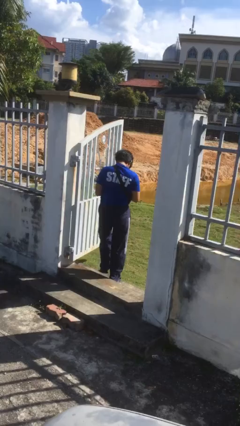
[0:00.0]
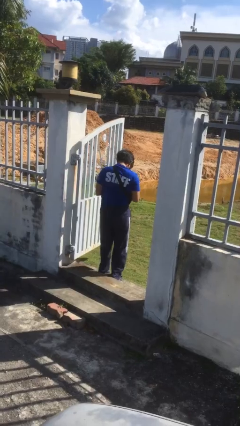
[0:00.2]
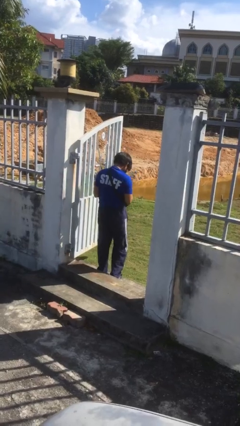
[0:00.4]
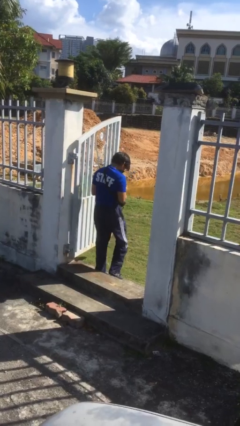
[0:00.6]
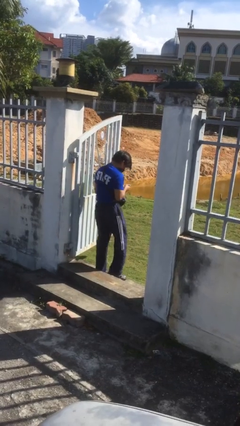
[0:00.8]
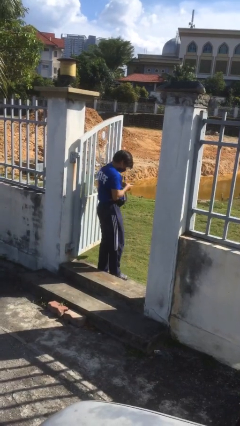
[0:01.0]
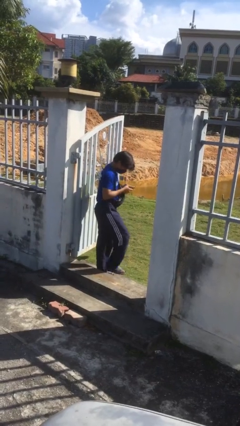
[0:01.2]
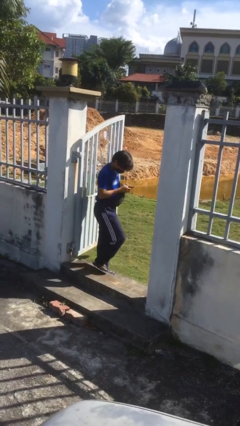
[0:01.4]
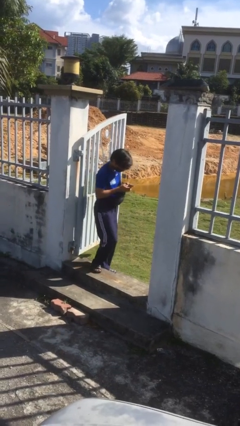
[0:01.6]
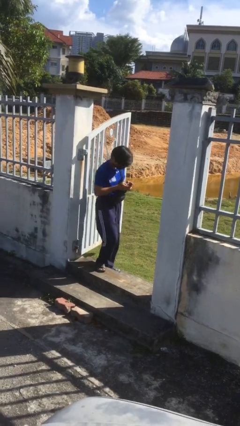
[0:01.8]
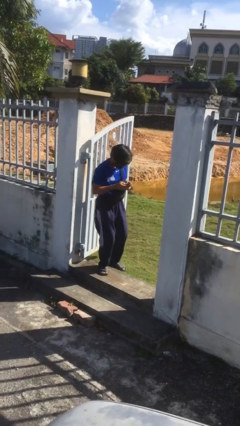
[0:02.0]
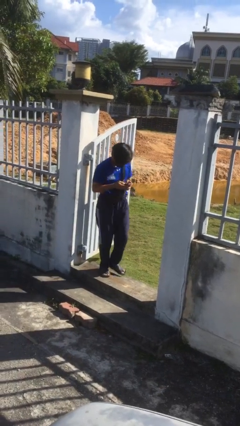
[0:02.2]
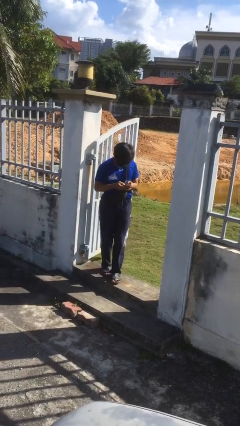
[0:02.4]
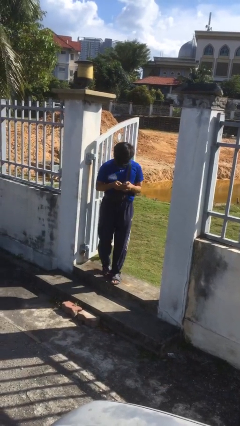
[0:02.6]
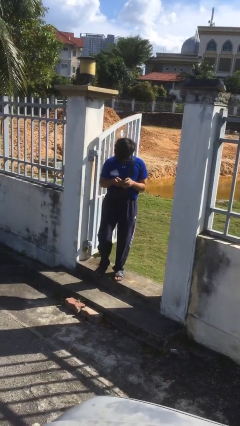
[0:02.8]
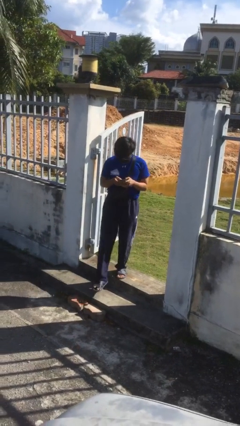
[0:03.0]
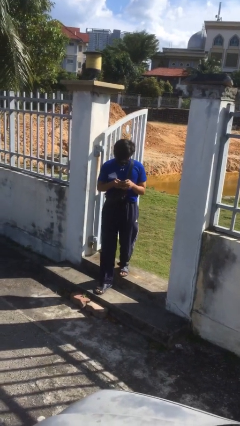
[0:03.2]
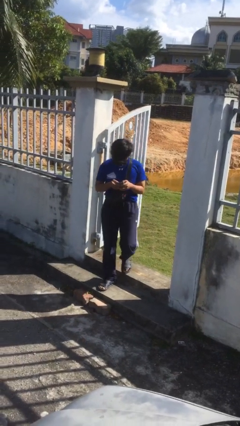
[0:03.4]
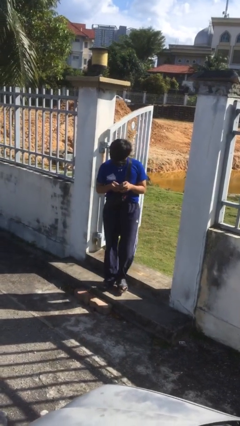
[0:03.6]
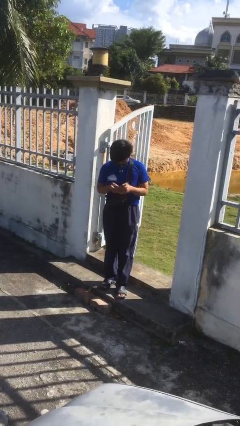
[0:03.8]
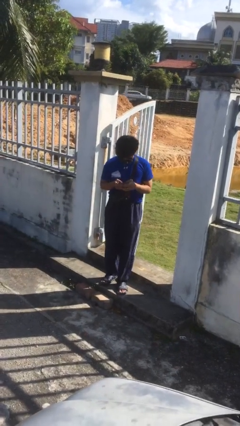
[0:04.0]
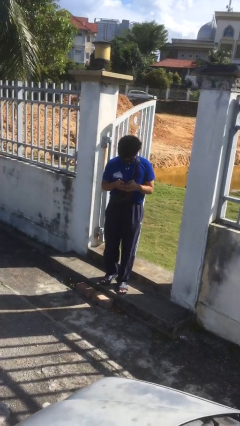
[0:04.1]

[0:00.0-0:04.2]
person enters scene through structure

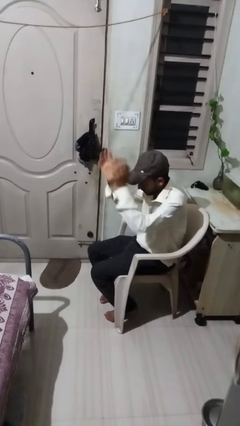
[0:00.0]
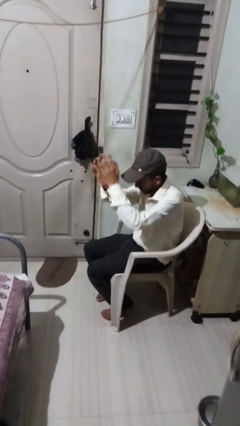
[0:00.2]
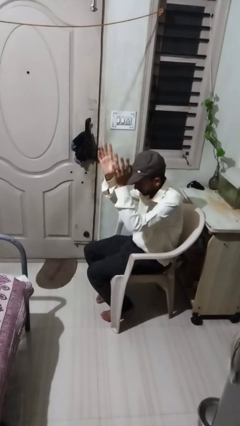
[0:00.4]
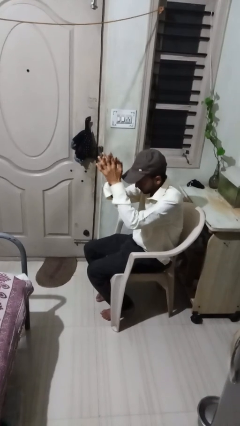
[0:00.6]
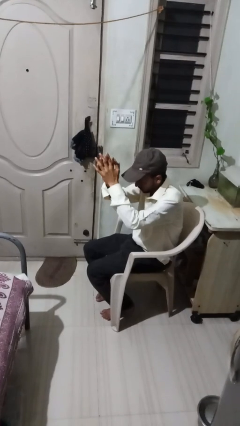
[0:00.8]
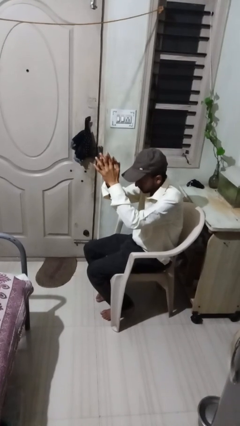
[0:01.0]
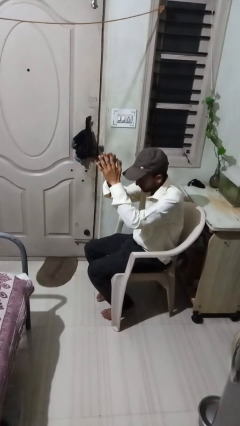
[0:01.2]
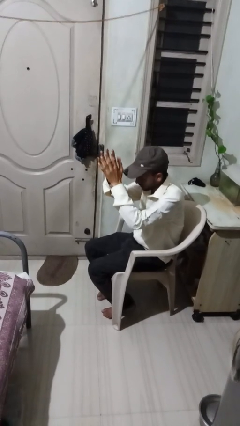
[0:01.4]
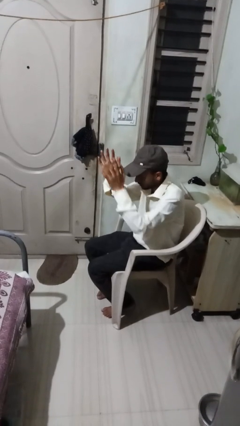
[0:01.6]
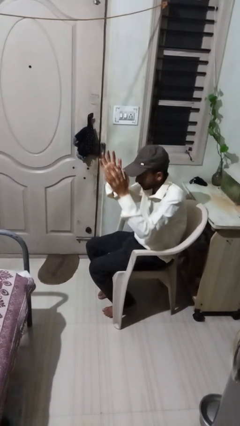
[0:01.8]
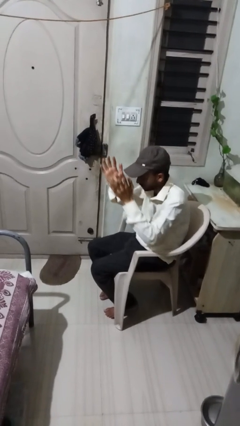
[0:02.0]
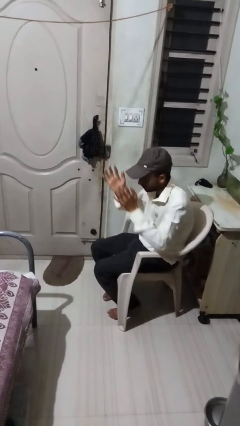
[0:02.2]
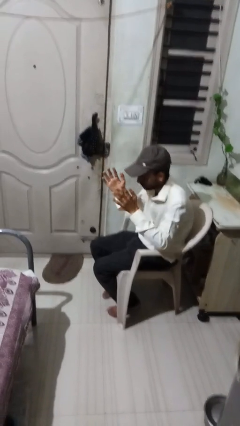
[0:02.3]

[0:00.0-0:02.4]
person claps hands

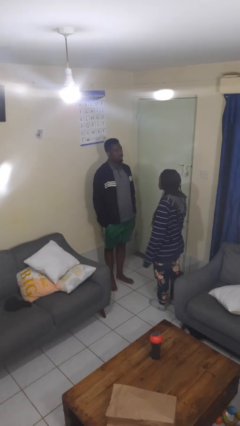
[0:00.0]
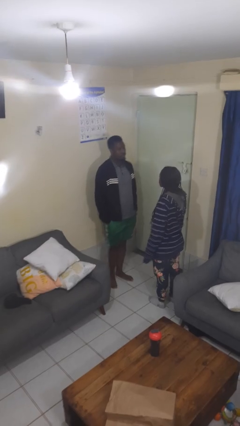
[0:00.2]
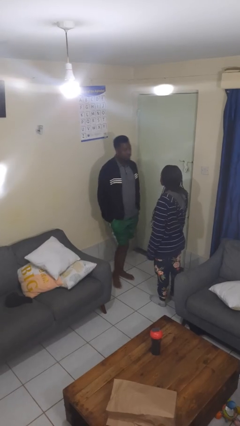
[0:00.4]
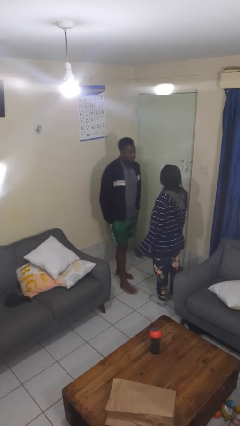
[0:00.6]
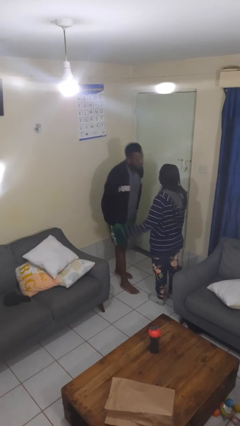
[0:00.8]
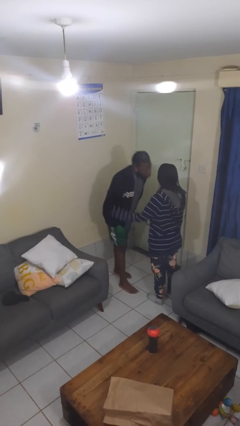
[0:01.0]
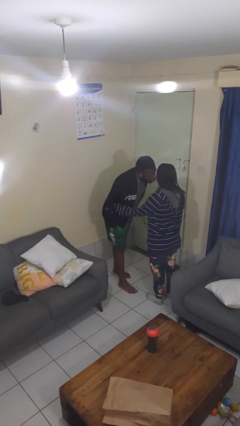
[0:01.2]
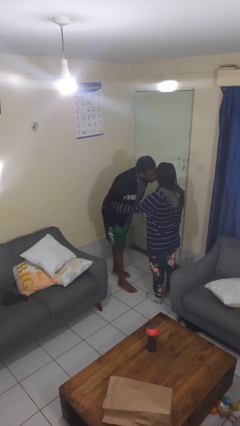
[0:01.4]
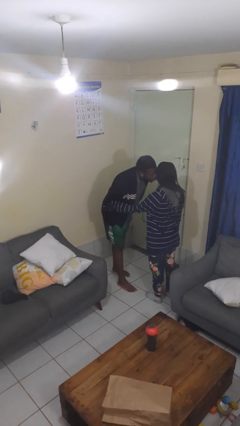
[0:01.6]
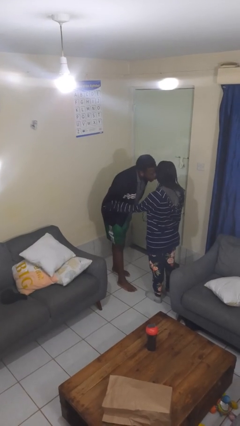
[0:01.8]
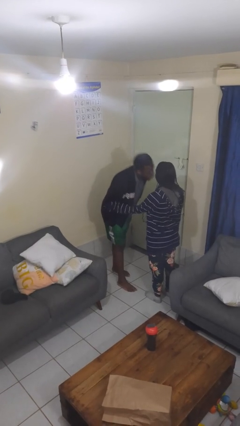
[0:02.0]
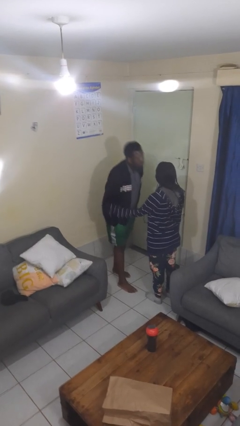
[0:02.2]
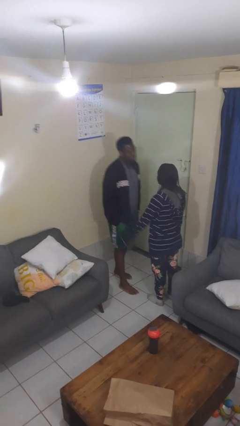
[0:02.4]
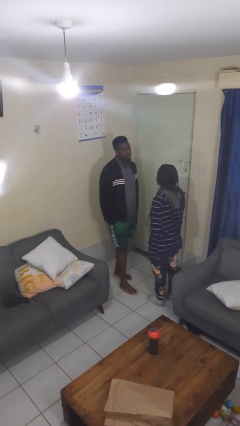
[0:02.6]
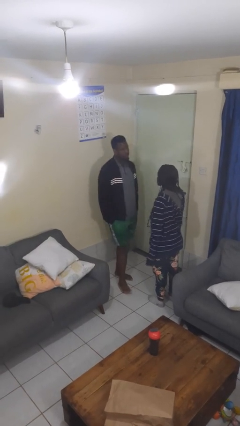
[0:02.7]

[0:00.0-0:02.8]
person kisses cheek of person

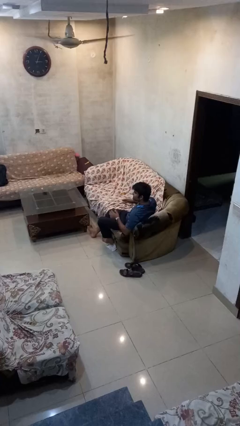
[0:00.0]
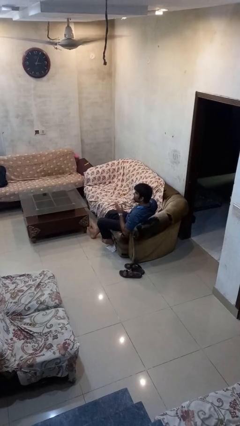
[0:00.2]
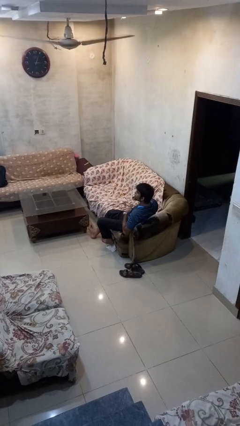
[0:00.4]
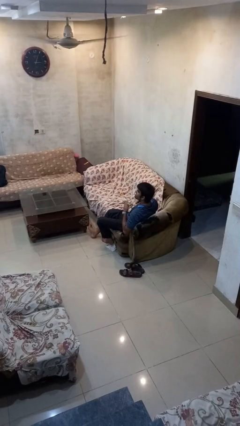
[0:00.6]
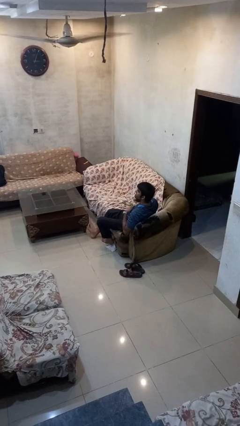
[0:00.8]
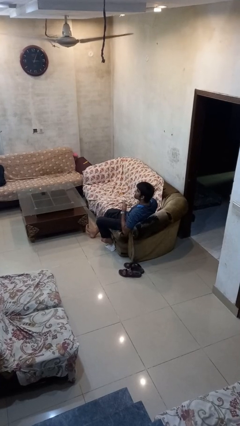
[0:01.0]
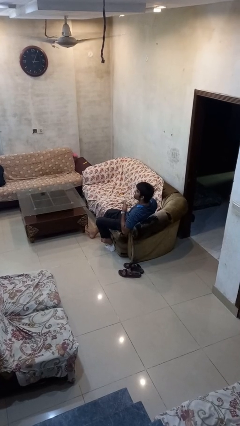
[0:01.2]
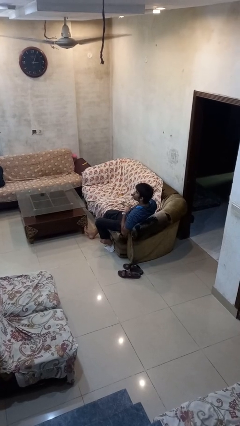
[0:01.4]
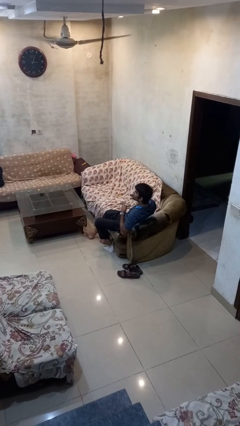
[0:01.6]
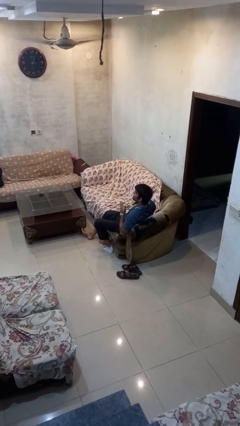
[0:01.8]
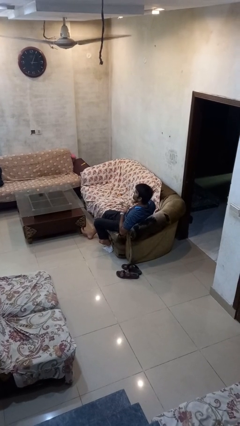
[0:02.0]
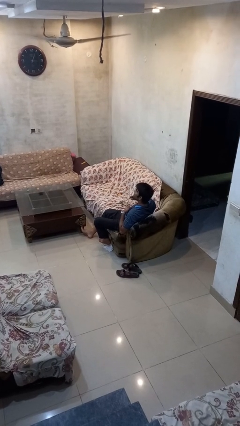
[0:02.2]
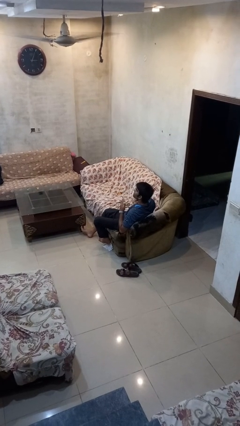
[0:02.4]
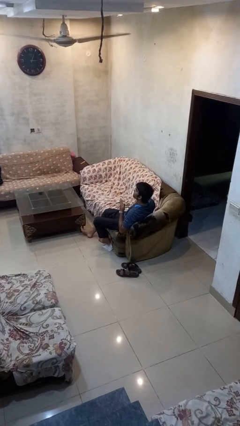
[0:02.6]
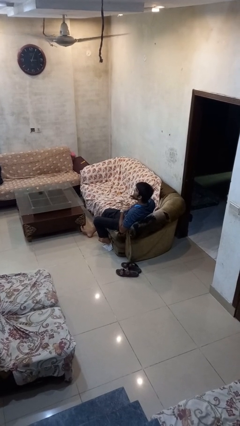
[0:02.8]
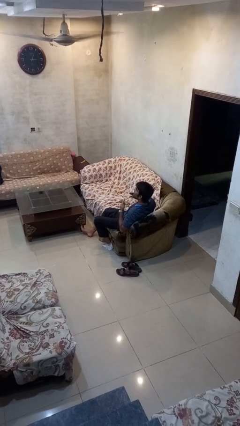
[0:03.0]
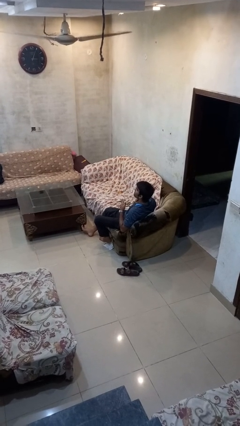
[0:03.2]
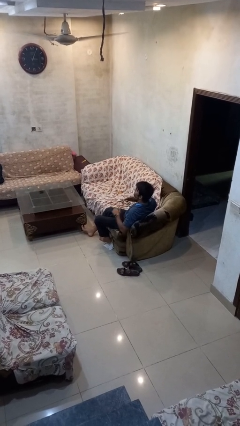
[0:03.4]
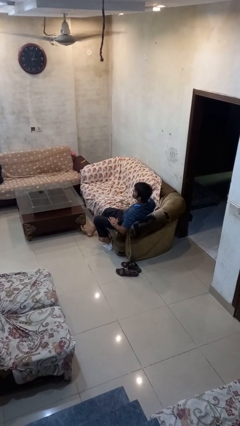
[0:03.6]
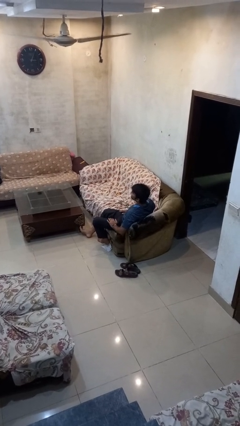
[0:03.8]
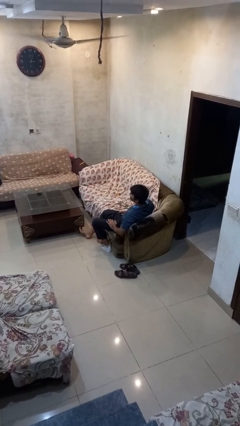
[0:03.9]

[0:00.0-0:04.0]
person drums on chest

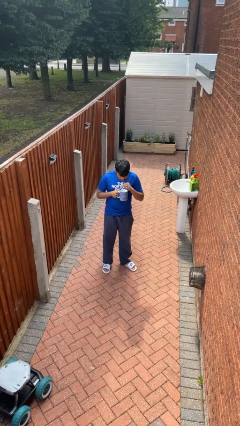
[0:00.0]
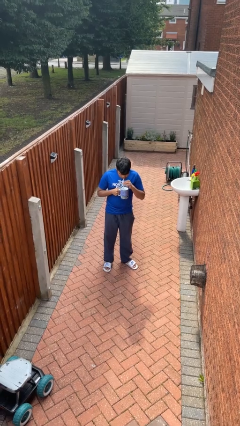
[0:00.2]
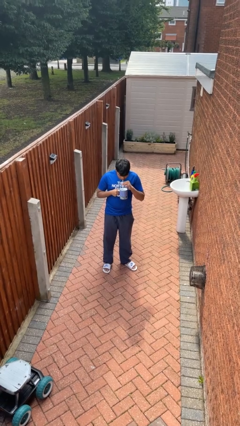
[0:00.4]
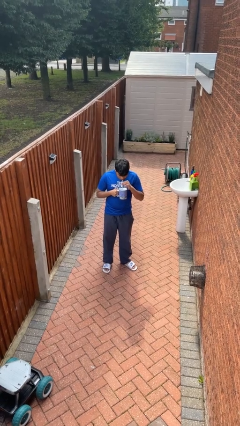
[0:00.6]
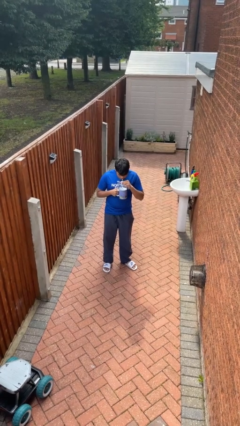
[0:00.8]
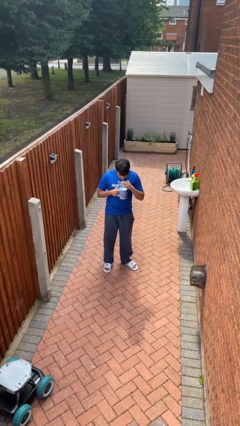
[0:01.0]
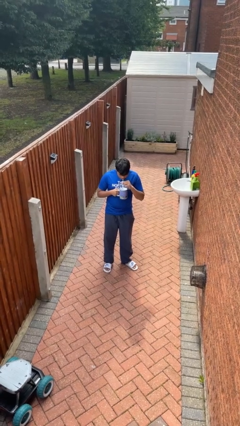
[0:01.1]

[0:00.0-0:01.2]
person drinks from straw

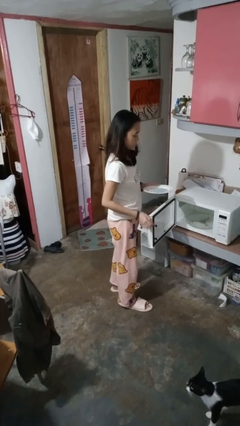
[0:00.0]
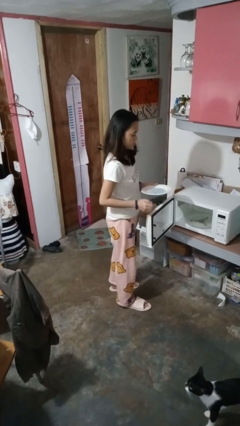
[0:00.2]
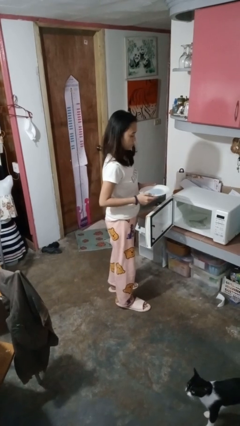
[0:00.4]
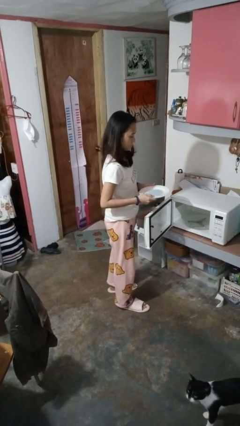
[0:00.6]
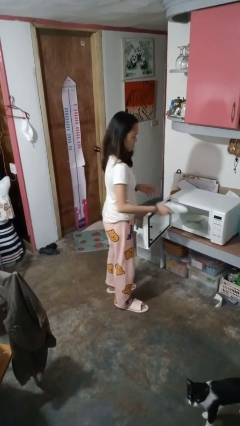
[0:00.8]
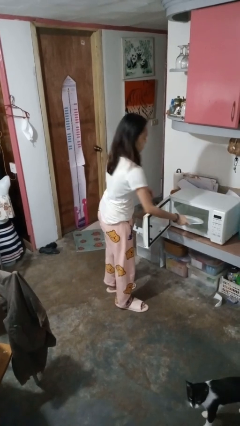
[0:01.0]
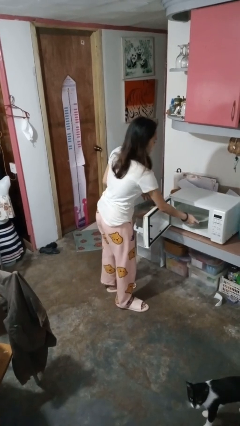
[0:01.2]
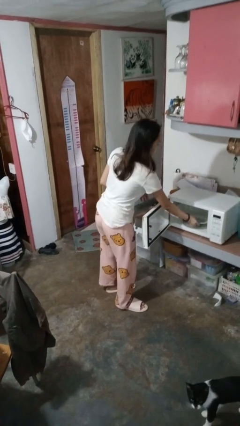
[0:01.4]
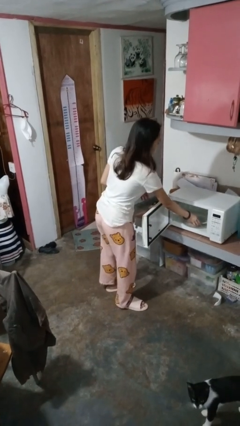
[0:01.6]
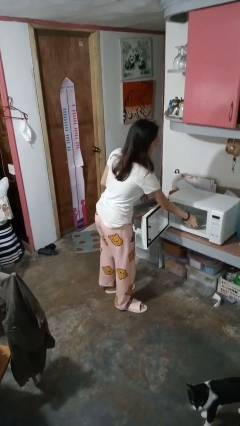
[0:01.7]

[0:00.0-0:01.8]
person puts object into microwave

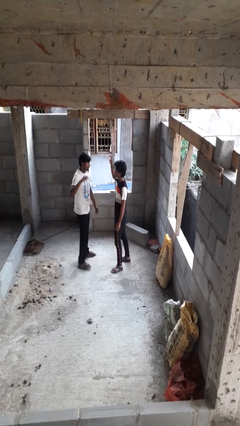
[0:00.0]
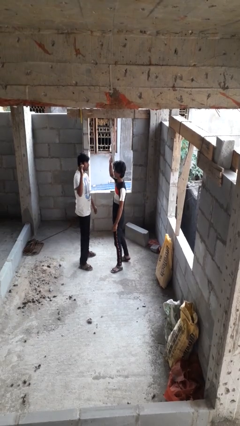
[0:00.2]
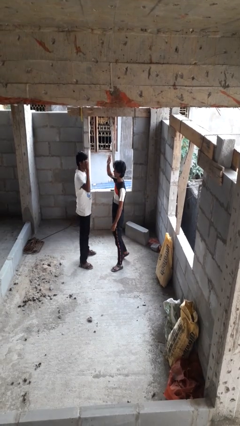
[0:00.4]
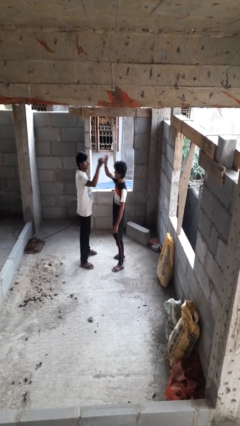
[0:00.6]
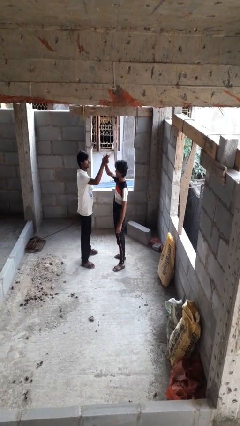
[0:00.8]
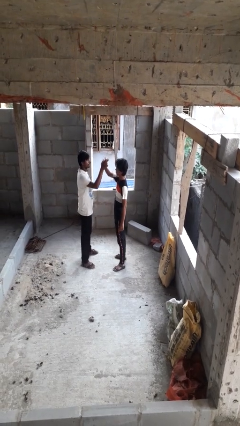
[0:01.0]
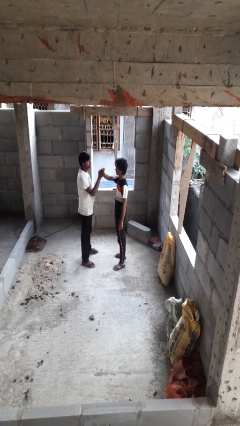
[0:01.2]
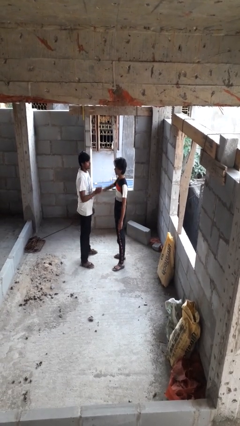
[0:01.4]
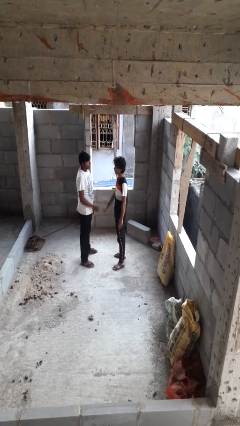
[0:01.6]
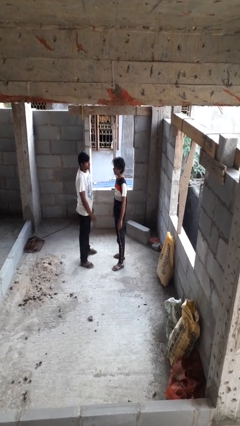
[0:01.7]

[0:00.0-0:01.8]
person highfives hand
